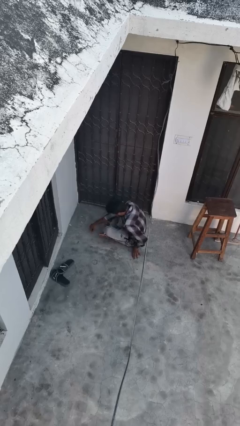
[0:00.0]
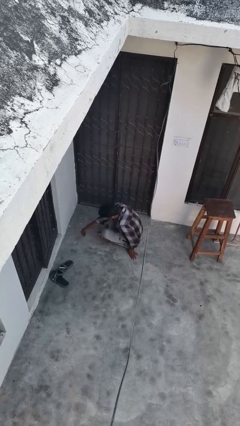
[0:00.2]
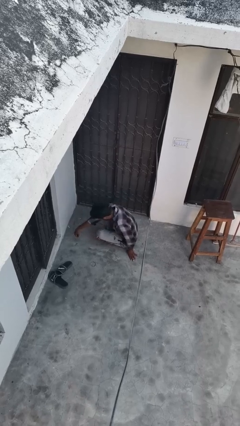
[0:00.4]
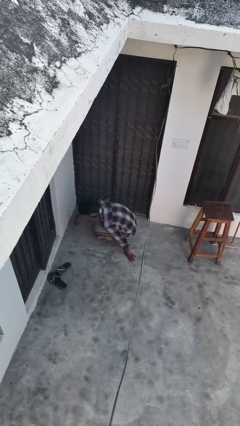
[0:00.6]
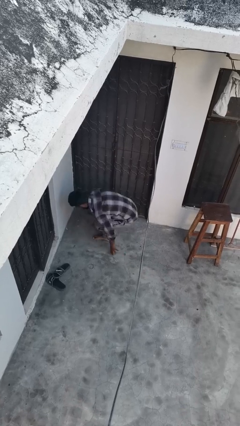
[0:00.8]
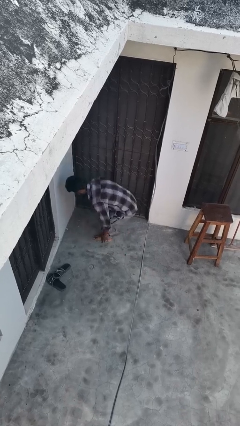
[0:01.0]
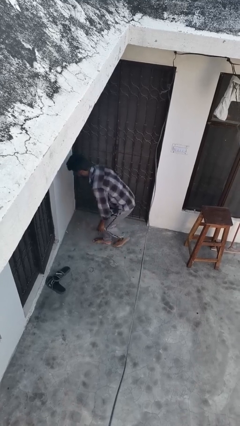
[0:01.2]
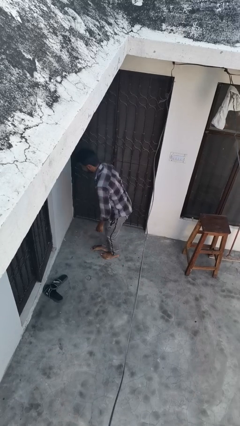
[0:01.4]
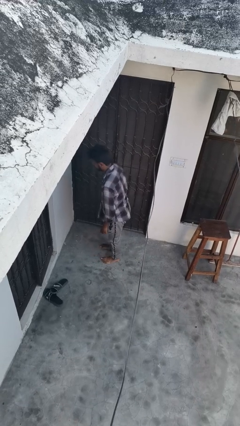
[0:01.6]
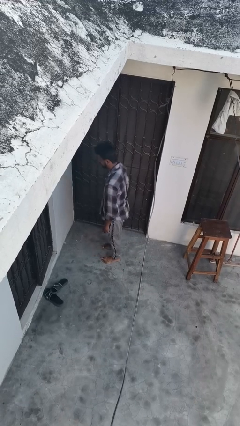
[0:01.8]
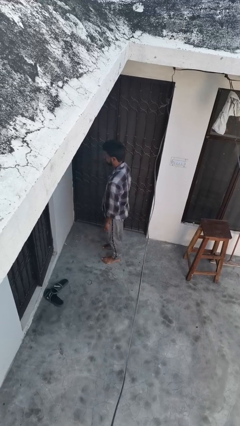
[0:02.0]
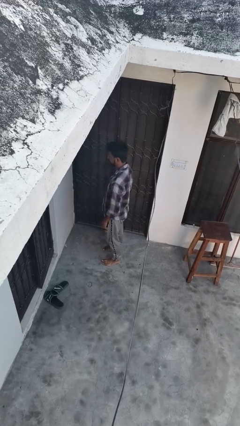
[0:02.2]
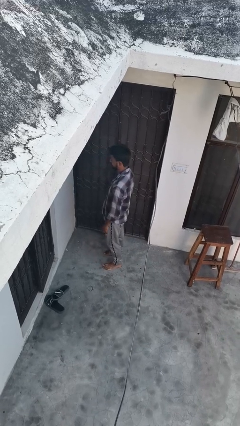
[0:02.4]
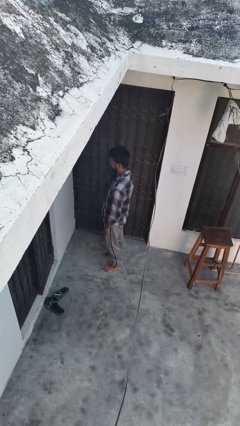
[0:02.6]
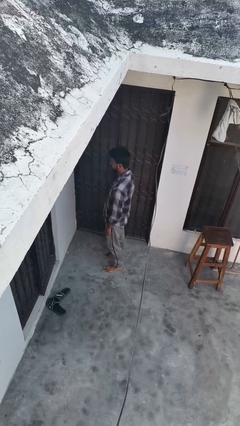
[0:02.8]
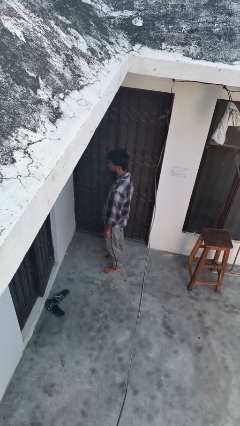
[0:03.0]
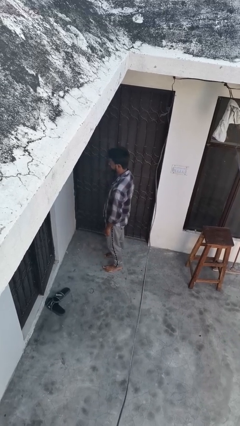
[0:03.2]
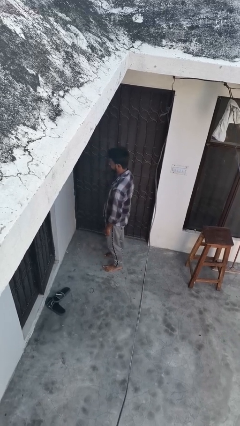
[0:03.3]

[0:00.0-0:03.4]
person stands up from floor

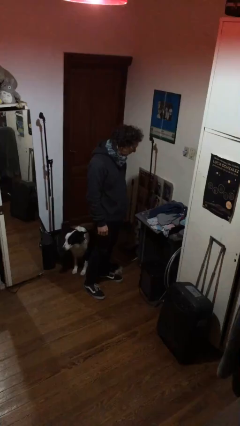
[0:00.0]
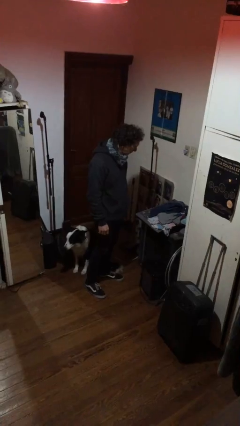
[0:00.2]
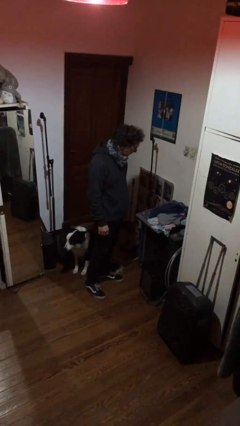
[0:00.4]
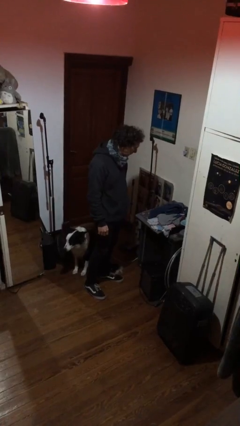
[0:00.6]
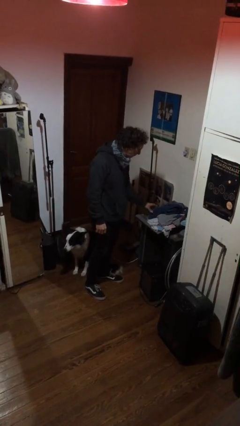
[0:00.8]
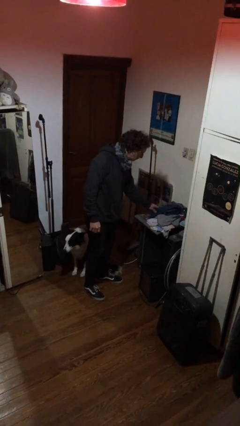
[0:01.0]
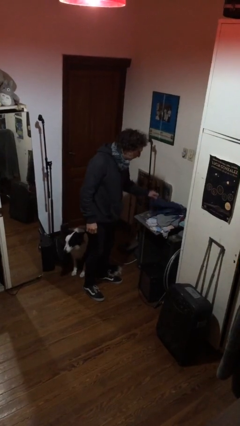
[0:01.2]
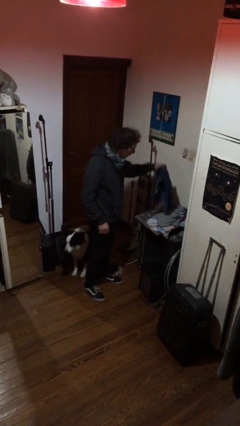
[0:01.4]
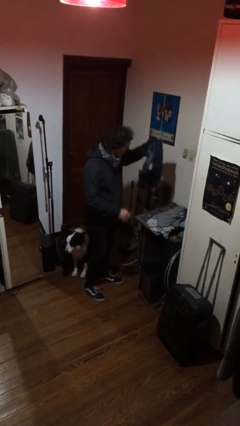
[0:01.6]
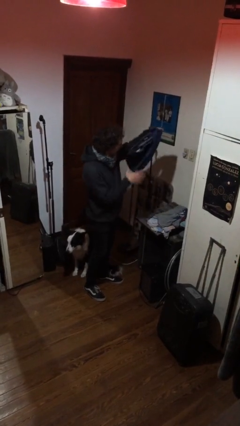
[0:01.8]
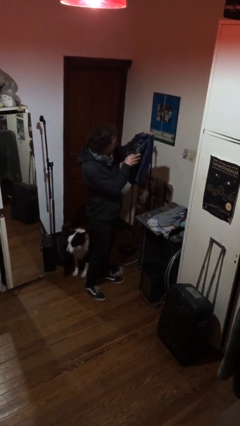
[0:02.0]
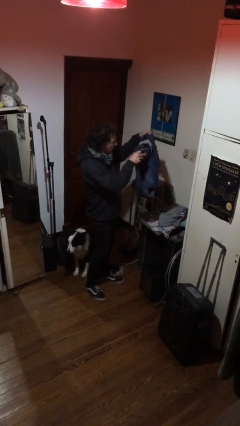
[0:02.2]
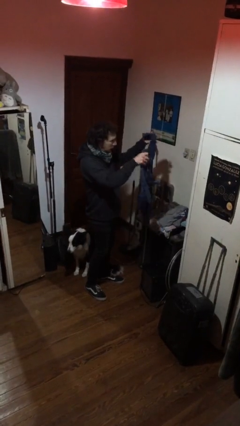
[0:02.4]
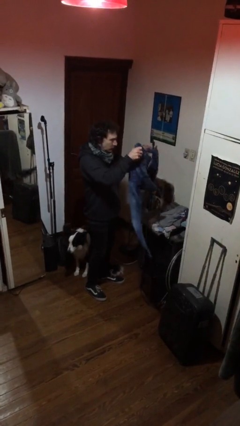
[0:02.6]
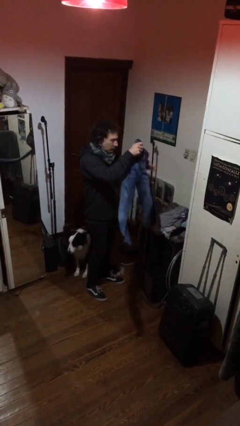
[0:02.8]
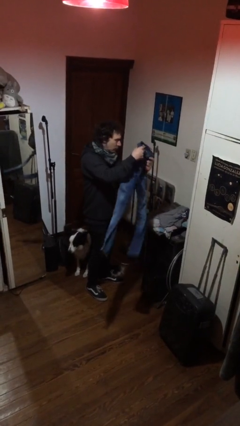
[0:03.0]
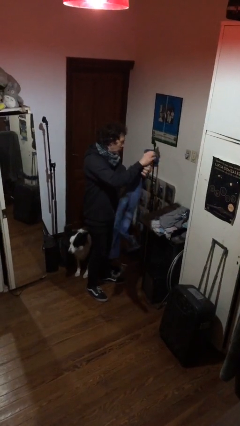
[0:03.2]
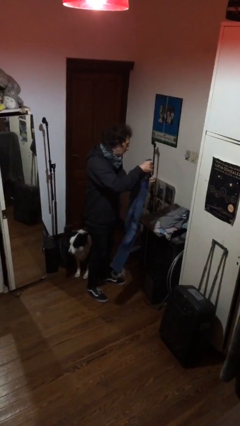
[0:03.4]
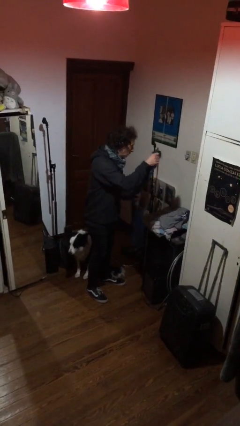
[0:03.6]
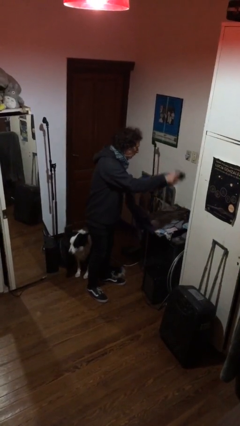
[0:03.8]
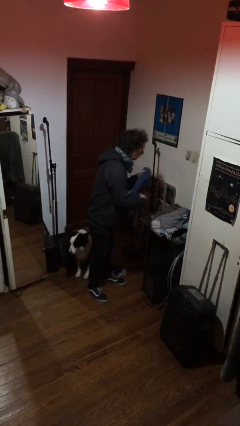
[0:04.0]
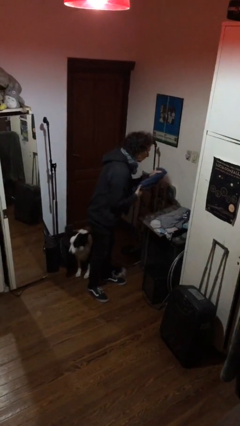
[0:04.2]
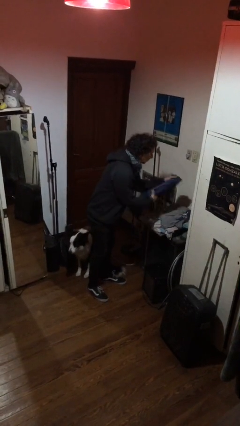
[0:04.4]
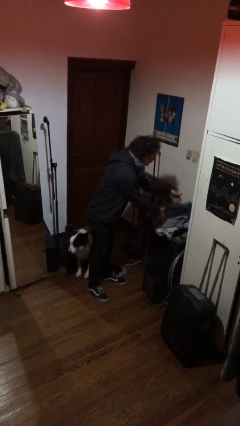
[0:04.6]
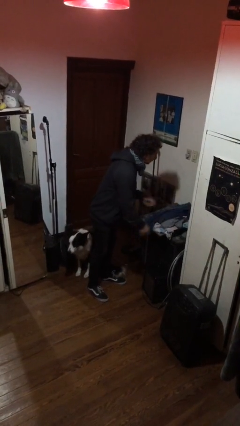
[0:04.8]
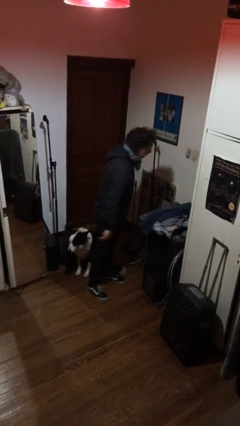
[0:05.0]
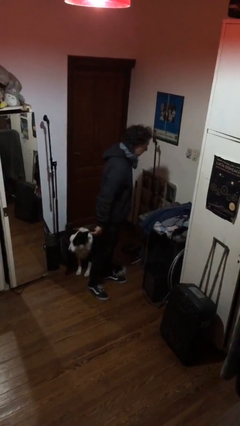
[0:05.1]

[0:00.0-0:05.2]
person folds pants

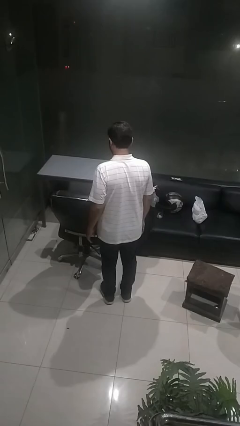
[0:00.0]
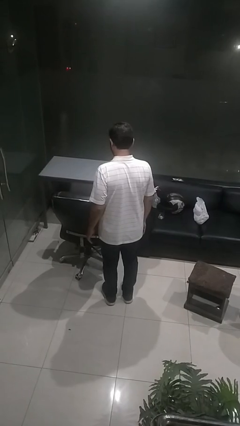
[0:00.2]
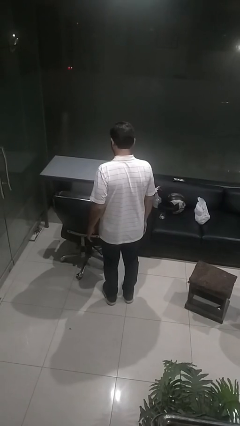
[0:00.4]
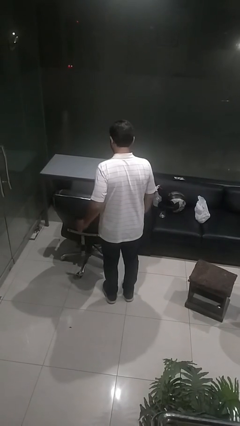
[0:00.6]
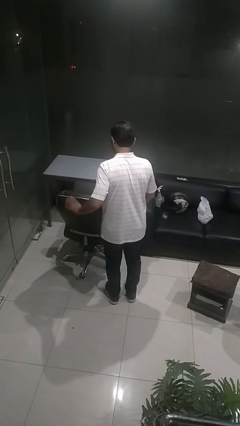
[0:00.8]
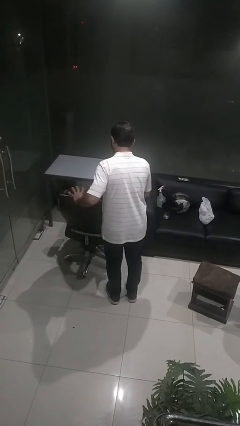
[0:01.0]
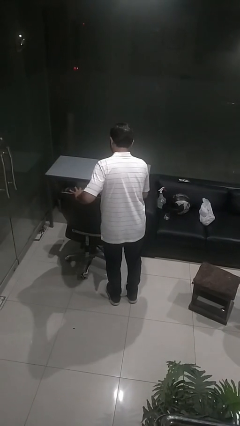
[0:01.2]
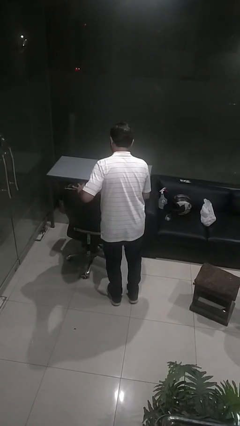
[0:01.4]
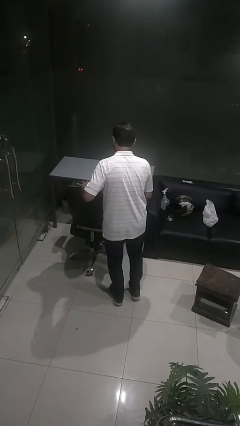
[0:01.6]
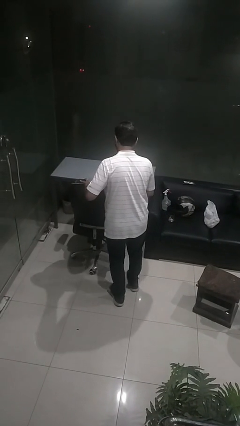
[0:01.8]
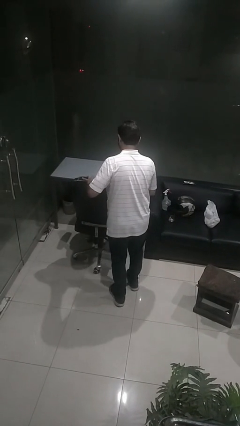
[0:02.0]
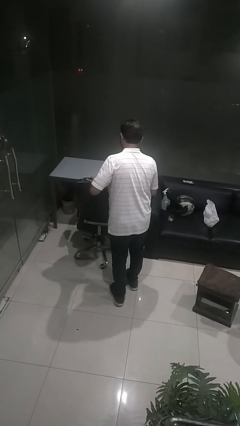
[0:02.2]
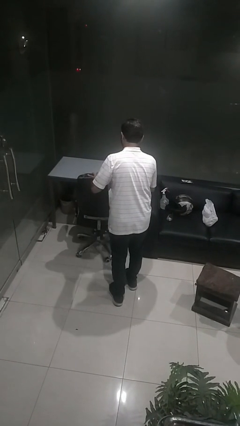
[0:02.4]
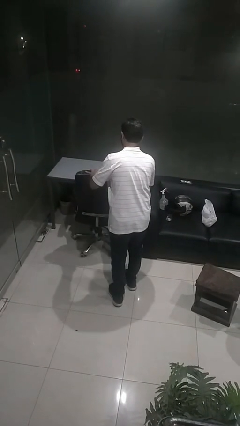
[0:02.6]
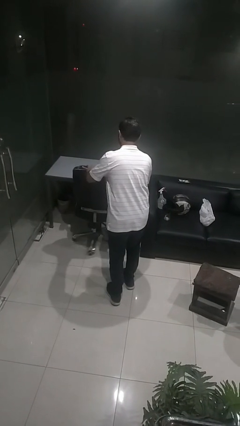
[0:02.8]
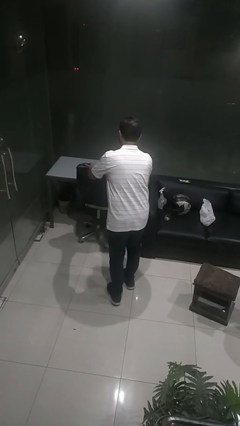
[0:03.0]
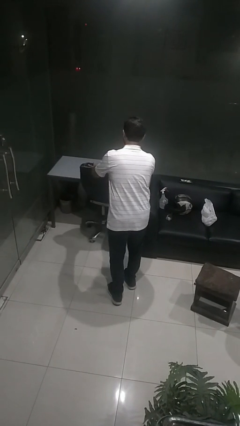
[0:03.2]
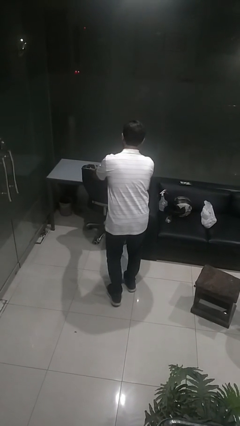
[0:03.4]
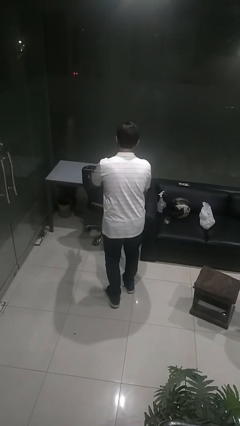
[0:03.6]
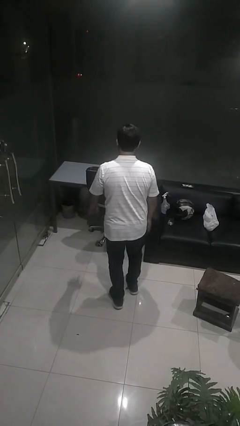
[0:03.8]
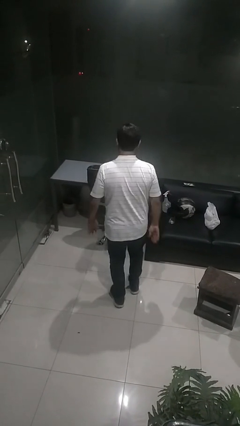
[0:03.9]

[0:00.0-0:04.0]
person pushes in chair

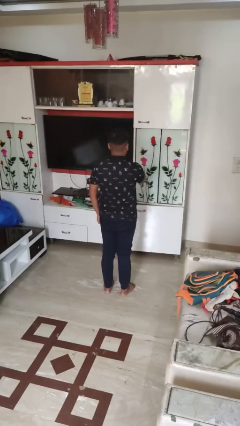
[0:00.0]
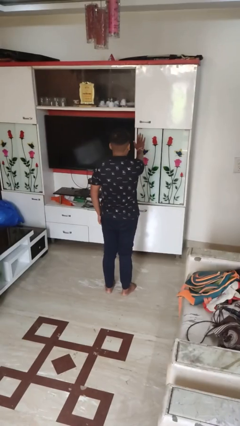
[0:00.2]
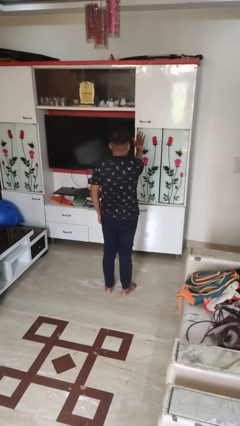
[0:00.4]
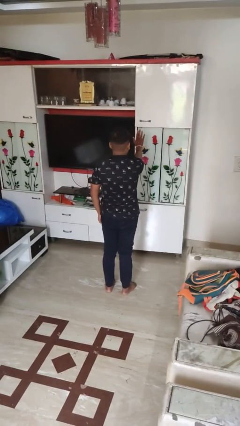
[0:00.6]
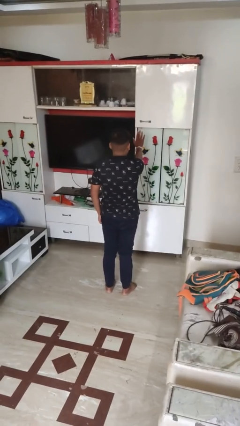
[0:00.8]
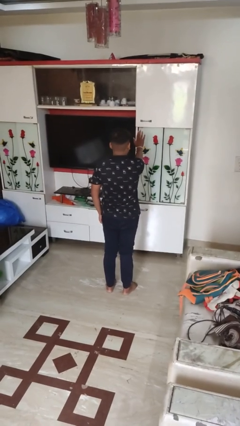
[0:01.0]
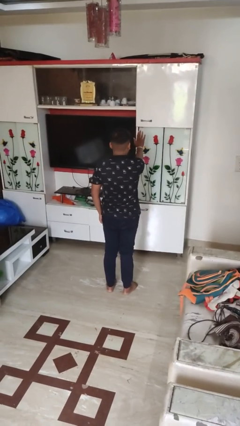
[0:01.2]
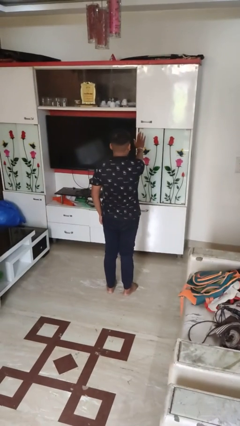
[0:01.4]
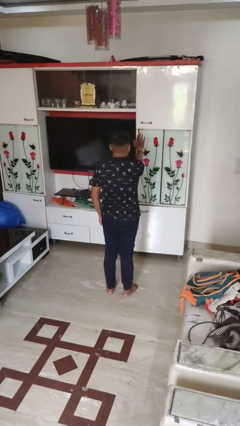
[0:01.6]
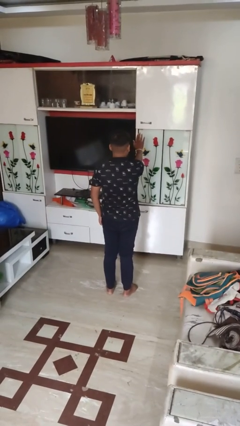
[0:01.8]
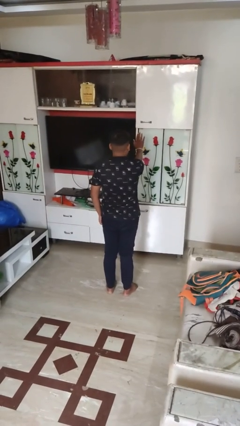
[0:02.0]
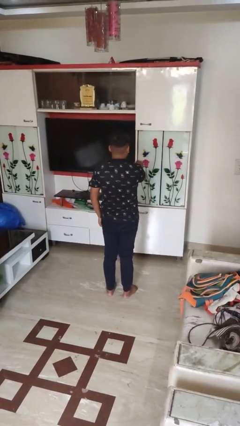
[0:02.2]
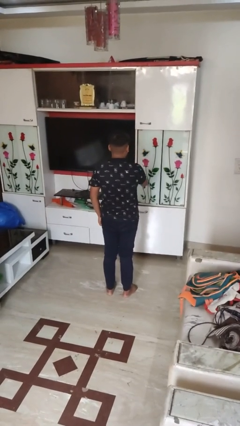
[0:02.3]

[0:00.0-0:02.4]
person gestures stop

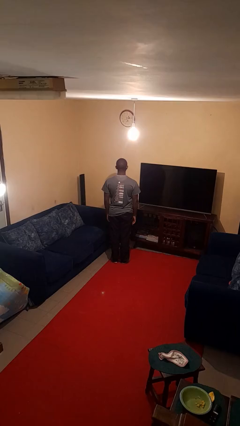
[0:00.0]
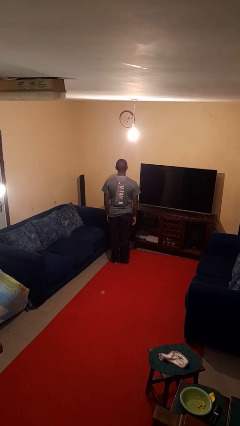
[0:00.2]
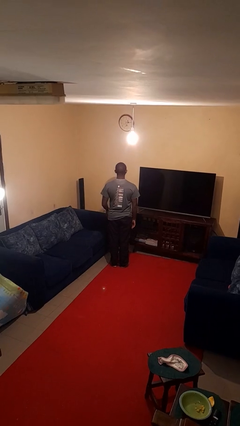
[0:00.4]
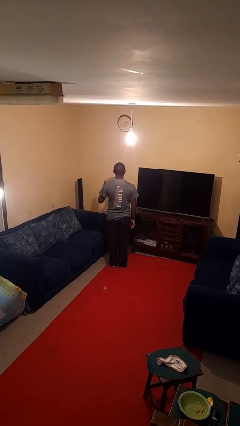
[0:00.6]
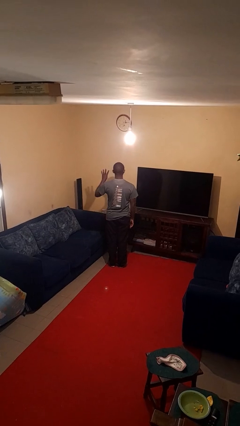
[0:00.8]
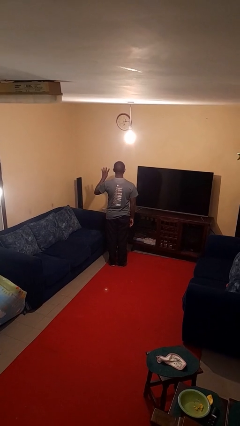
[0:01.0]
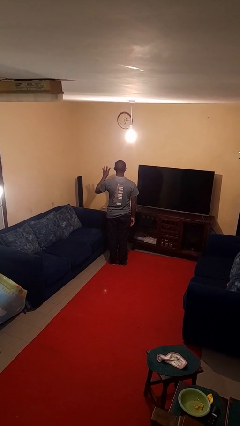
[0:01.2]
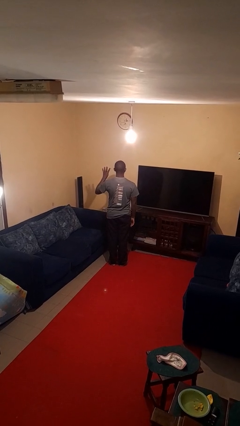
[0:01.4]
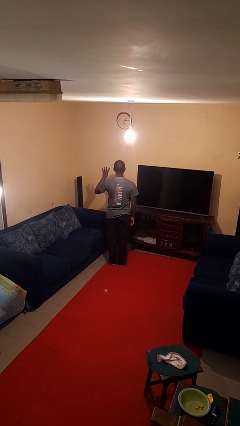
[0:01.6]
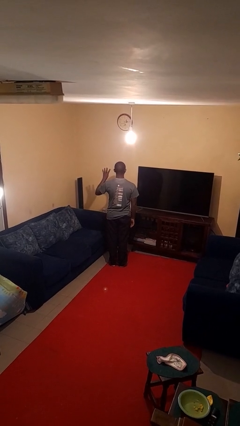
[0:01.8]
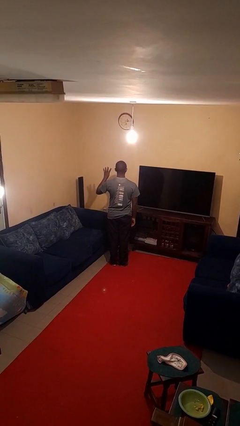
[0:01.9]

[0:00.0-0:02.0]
person gestures number four

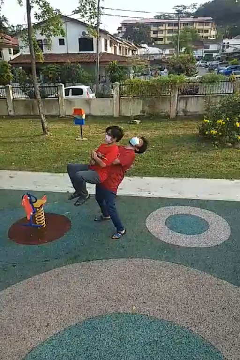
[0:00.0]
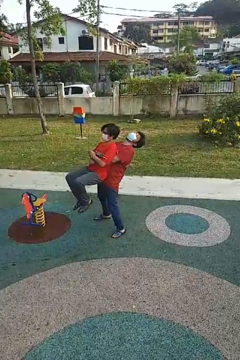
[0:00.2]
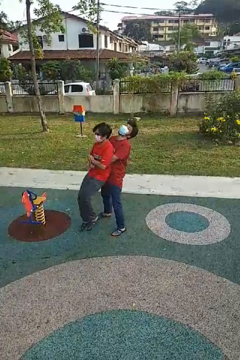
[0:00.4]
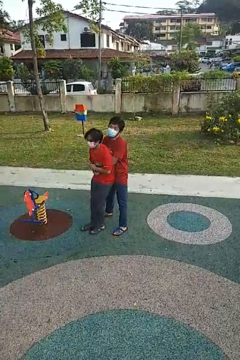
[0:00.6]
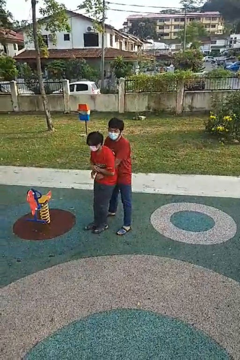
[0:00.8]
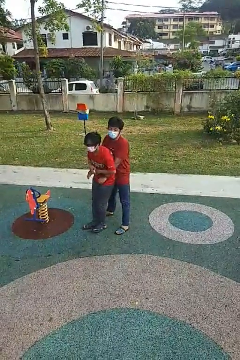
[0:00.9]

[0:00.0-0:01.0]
person puts down person
